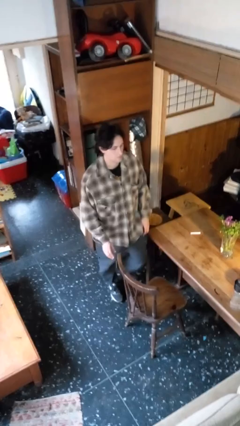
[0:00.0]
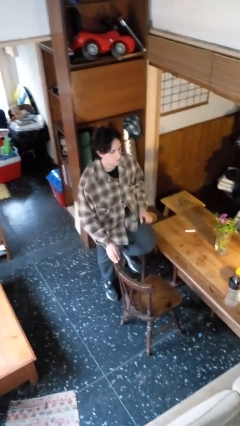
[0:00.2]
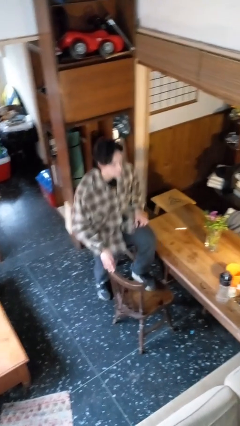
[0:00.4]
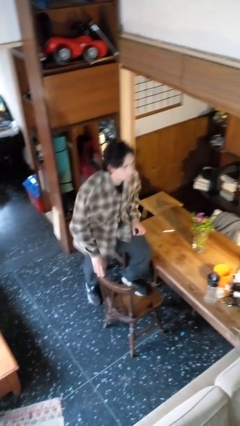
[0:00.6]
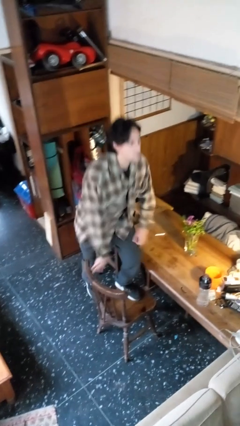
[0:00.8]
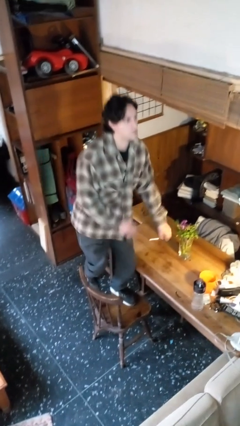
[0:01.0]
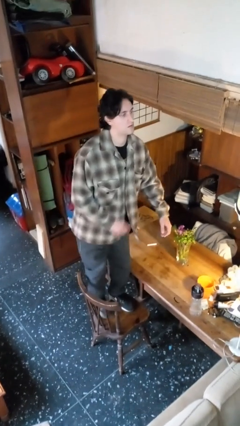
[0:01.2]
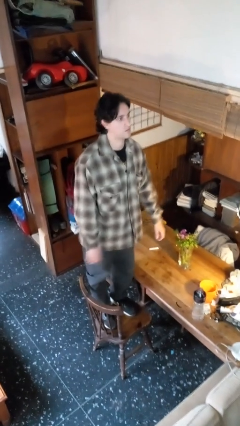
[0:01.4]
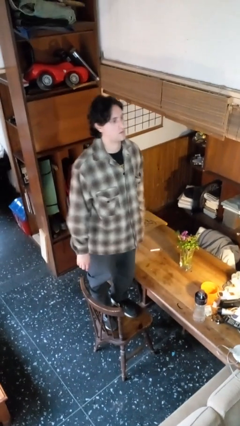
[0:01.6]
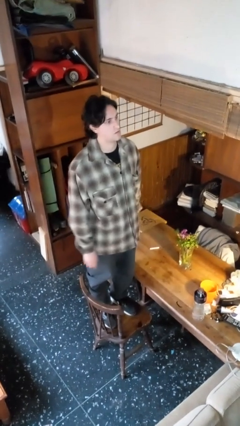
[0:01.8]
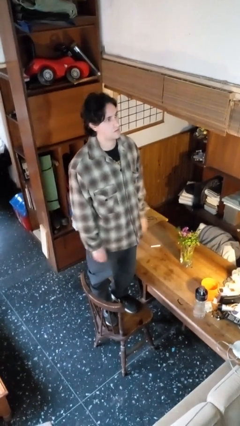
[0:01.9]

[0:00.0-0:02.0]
person climbs on chair

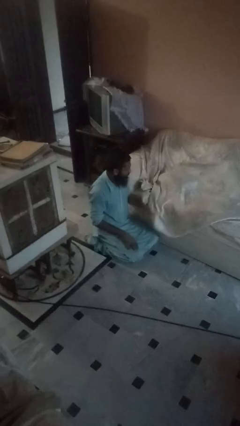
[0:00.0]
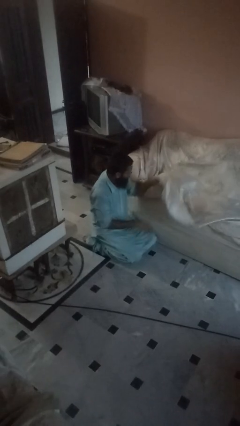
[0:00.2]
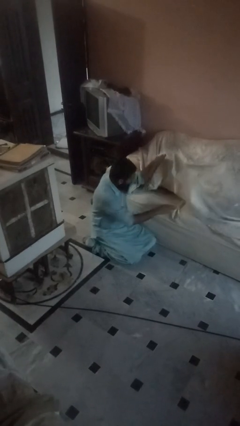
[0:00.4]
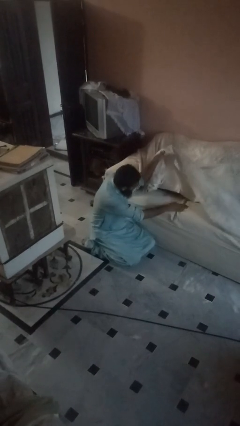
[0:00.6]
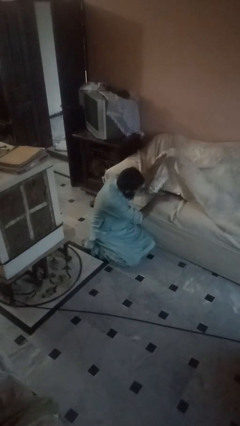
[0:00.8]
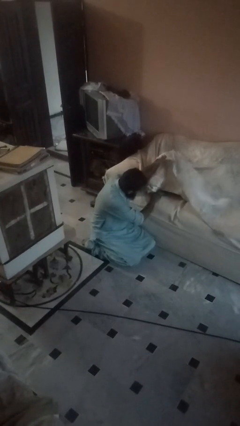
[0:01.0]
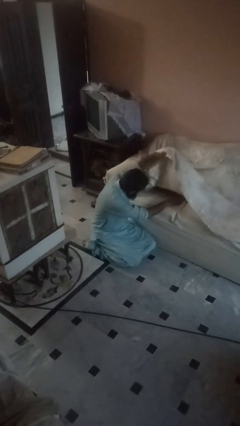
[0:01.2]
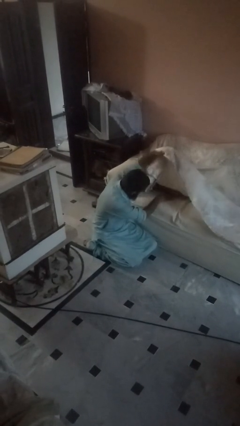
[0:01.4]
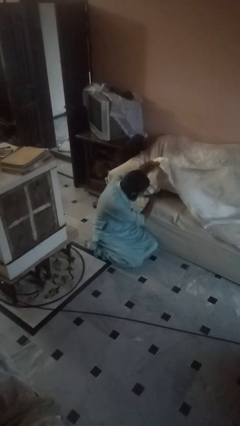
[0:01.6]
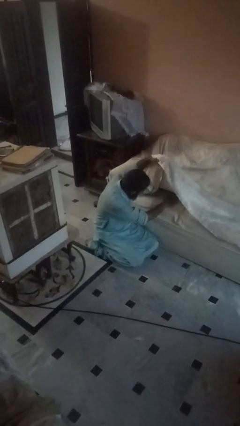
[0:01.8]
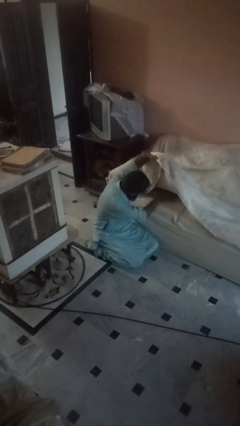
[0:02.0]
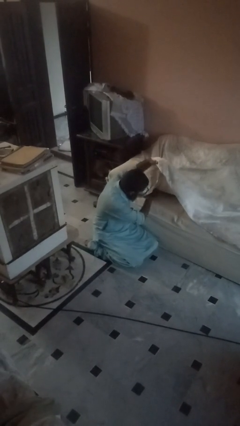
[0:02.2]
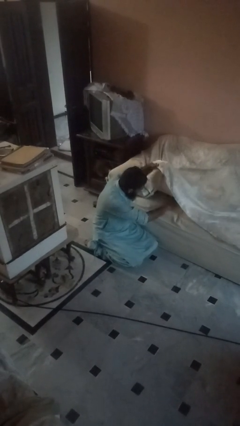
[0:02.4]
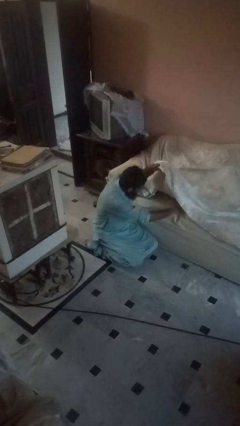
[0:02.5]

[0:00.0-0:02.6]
person searches in couch

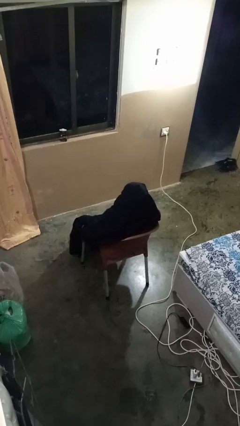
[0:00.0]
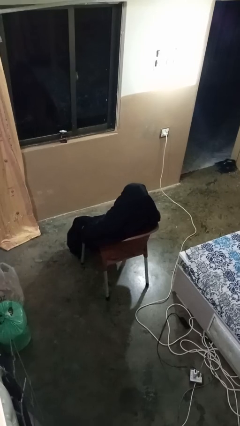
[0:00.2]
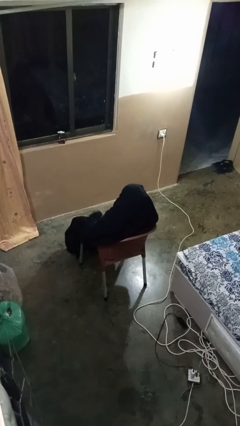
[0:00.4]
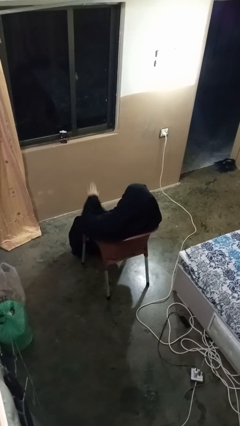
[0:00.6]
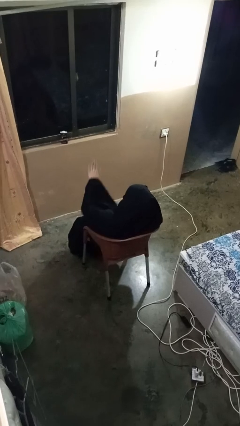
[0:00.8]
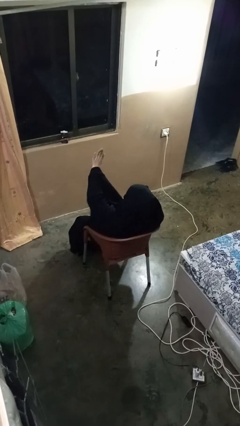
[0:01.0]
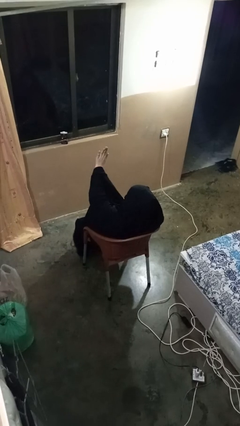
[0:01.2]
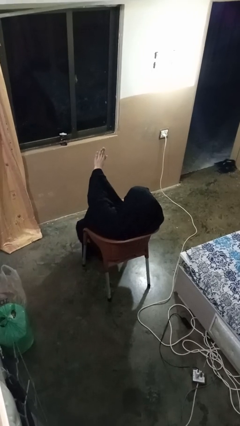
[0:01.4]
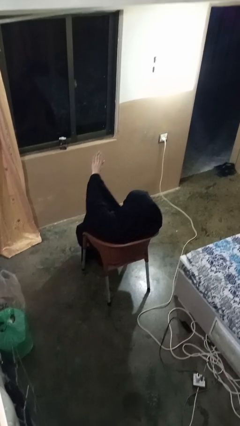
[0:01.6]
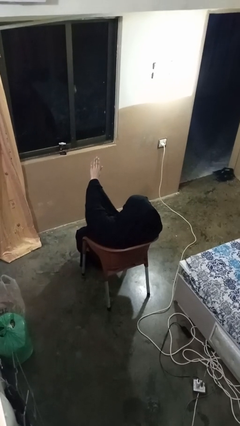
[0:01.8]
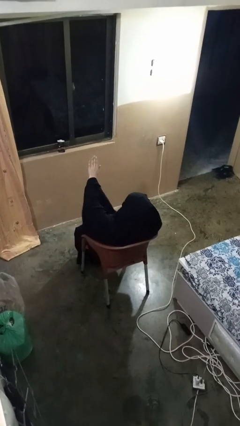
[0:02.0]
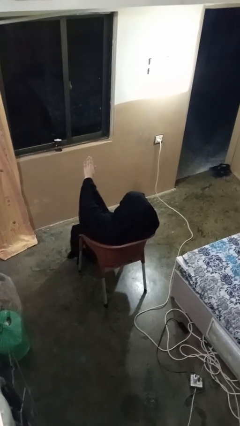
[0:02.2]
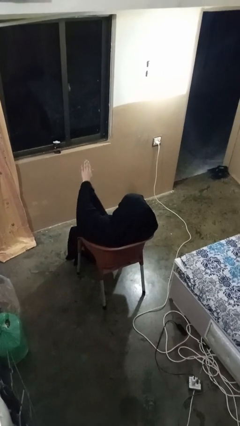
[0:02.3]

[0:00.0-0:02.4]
person gestures raise hand

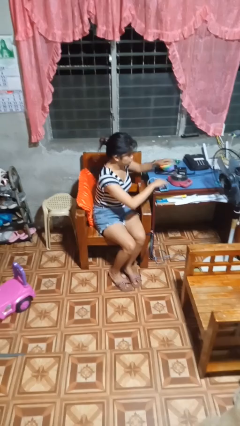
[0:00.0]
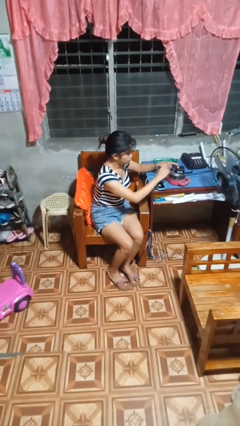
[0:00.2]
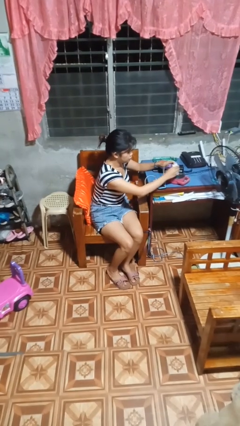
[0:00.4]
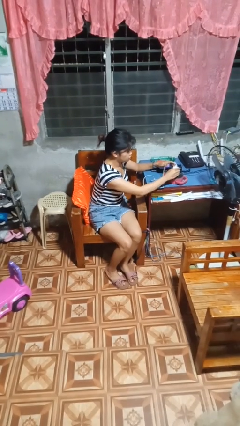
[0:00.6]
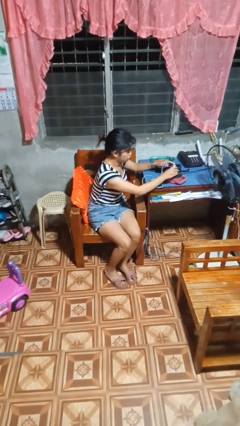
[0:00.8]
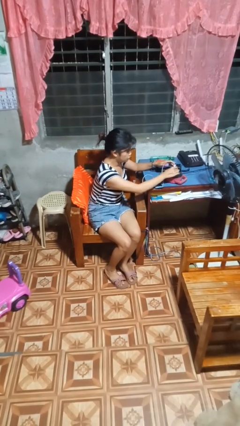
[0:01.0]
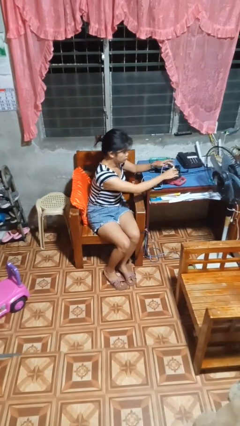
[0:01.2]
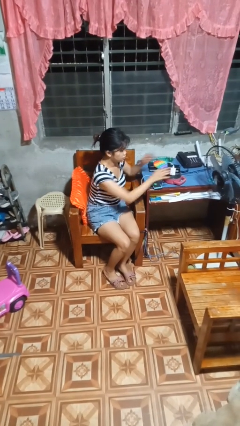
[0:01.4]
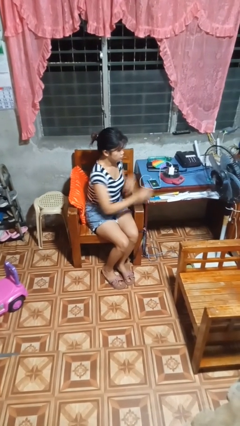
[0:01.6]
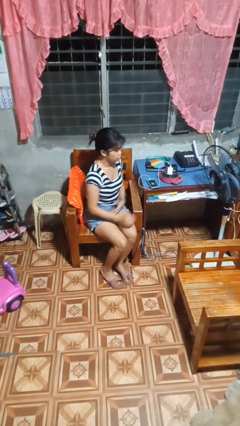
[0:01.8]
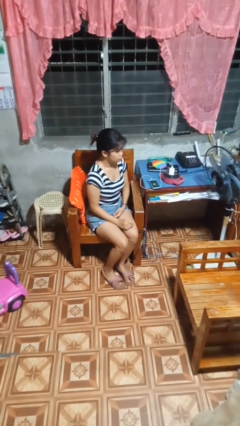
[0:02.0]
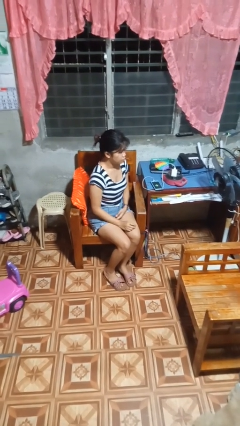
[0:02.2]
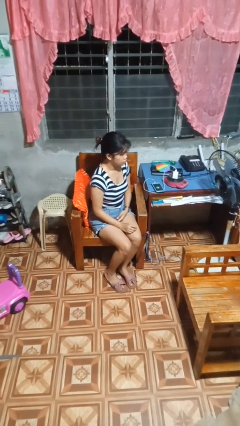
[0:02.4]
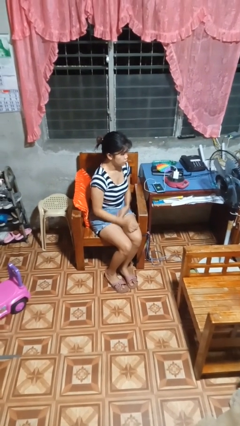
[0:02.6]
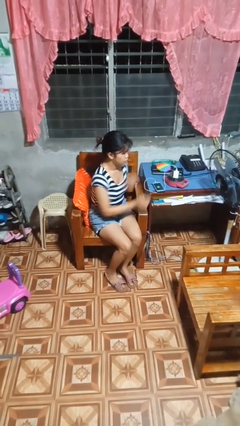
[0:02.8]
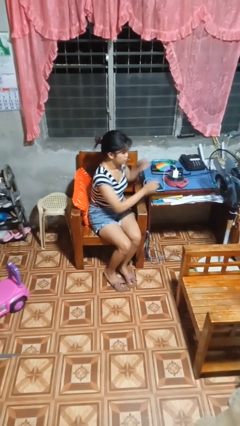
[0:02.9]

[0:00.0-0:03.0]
person plugs into electrical socket

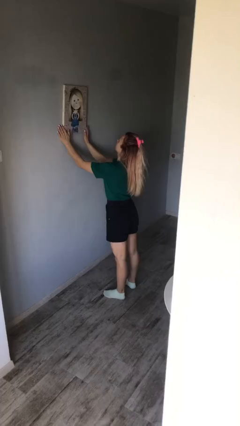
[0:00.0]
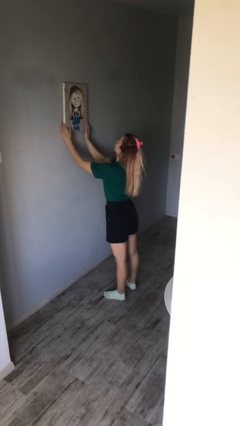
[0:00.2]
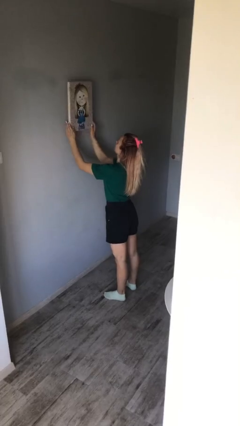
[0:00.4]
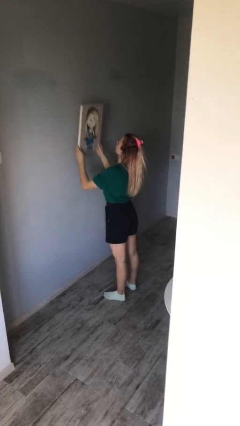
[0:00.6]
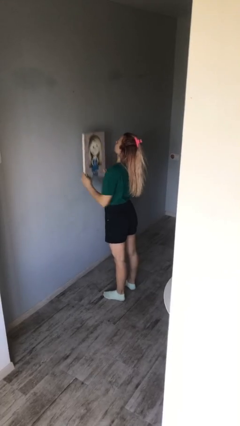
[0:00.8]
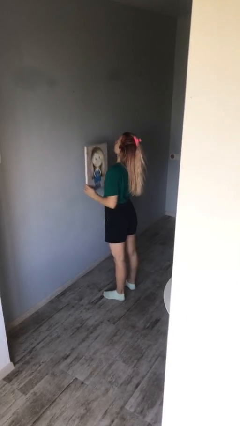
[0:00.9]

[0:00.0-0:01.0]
person takes down picture frame

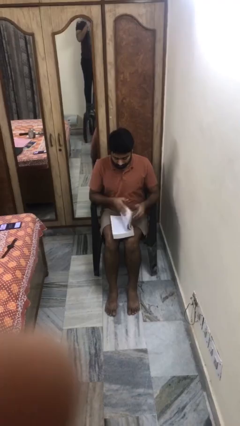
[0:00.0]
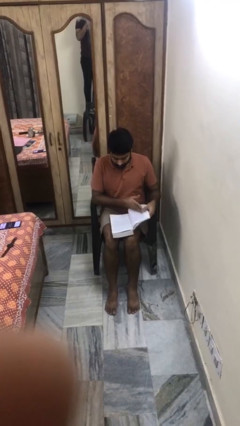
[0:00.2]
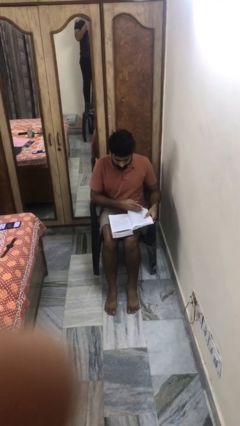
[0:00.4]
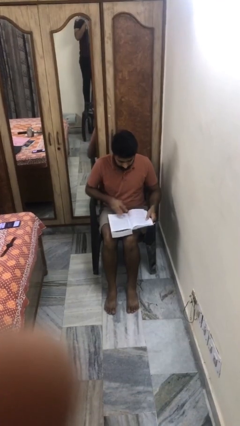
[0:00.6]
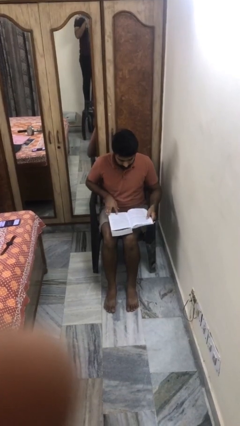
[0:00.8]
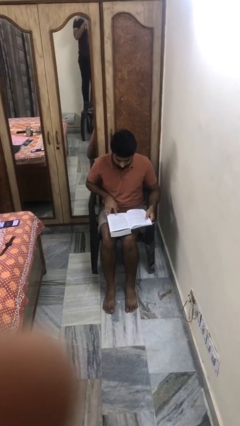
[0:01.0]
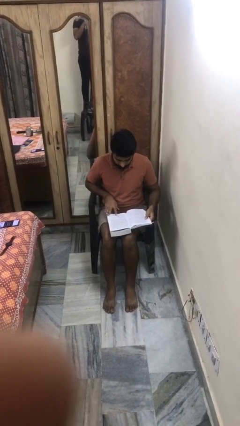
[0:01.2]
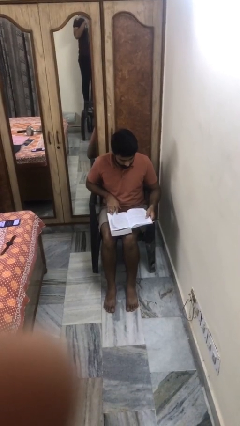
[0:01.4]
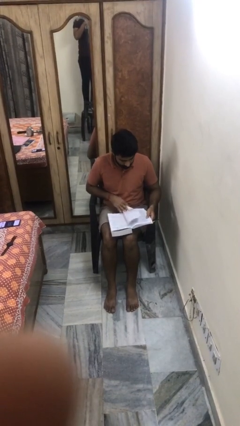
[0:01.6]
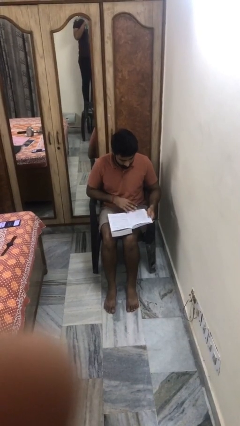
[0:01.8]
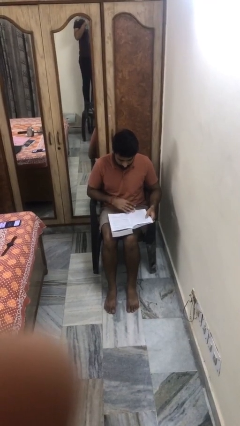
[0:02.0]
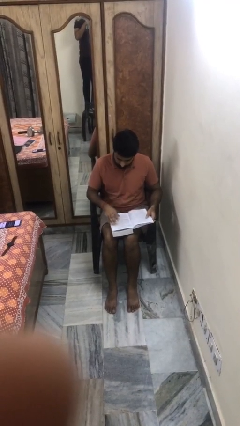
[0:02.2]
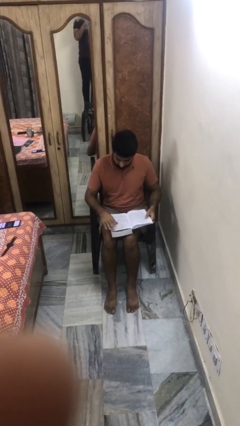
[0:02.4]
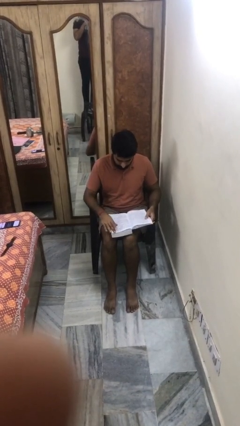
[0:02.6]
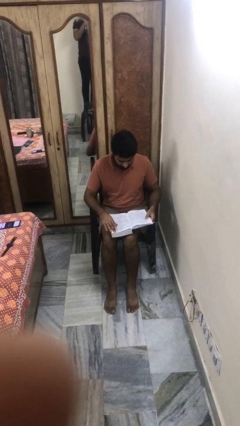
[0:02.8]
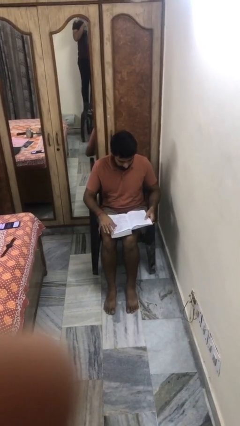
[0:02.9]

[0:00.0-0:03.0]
person reads book

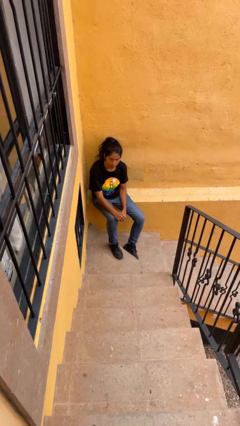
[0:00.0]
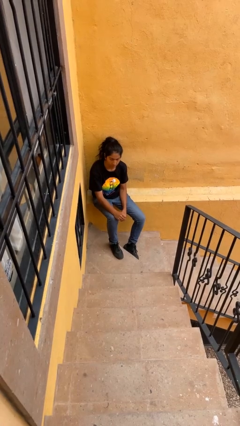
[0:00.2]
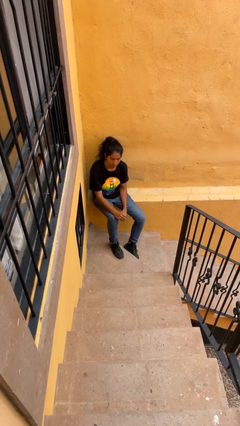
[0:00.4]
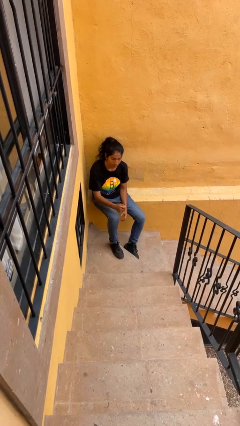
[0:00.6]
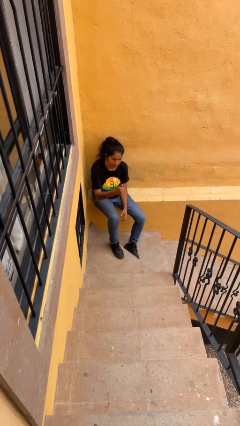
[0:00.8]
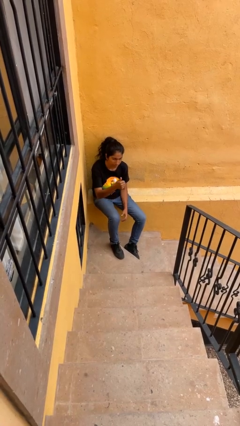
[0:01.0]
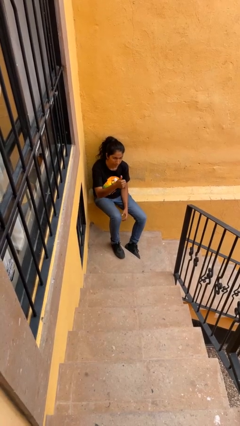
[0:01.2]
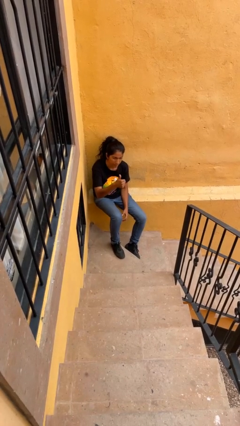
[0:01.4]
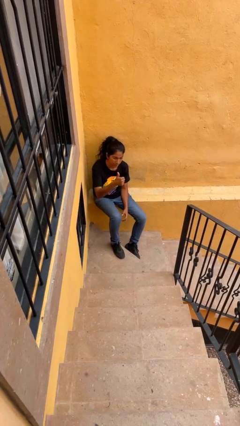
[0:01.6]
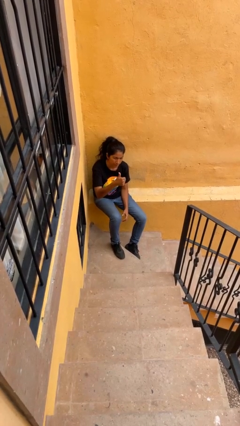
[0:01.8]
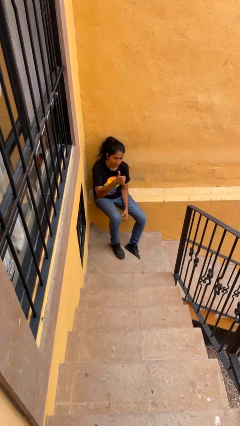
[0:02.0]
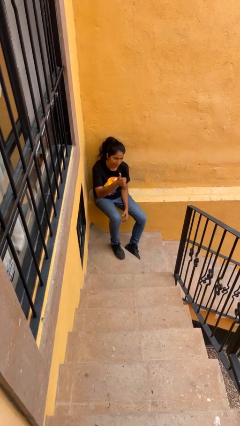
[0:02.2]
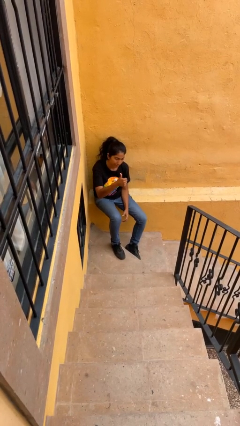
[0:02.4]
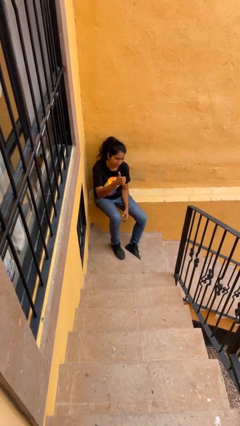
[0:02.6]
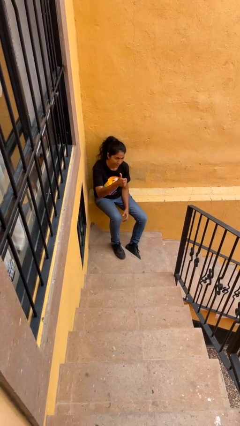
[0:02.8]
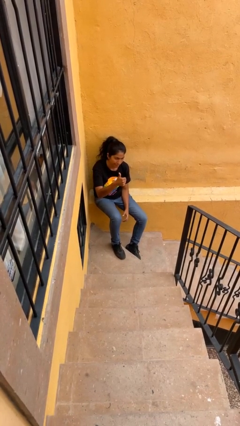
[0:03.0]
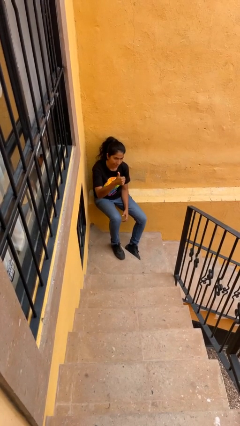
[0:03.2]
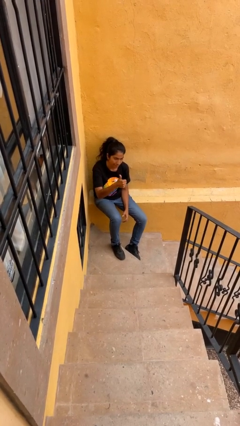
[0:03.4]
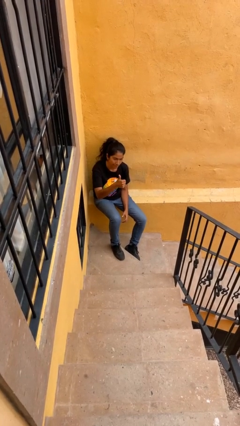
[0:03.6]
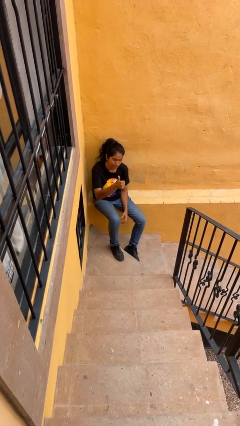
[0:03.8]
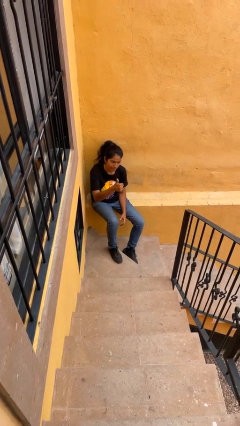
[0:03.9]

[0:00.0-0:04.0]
person gestures thumbs up
